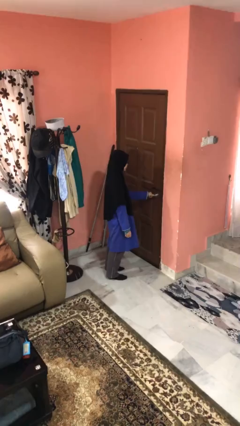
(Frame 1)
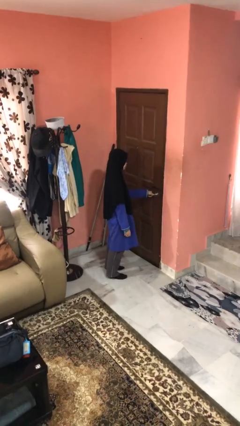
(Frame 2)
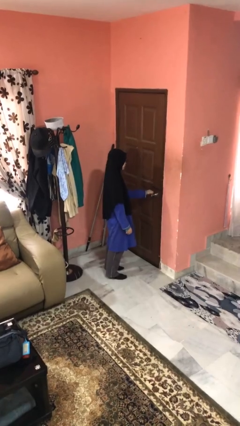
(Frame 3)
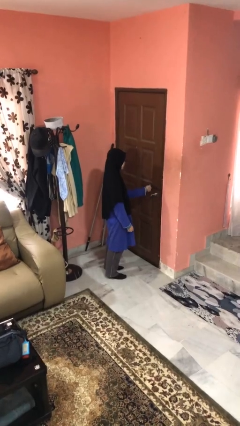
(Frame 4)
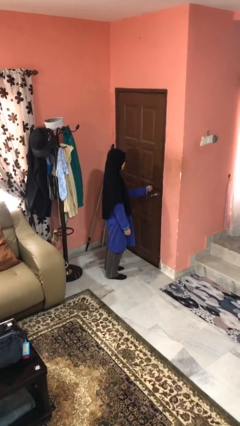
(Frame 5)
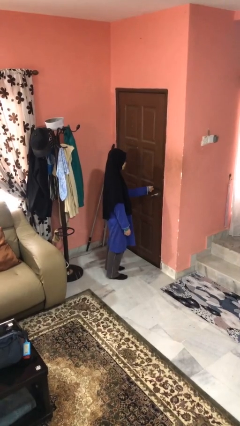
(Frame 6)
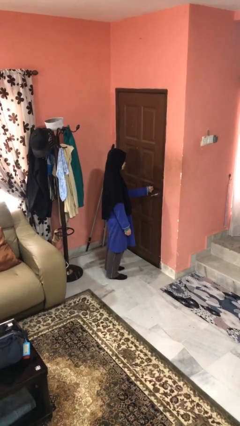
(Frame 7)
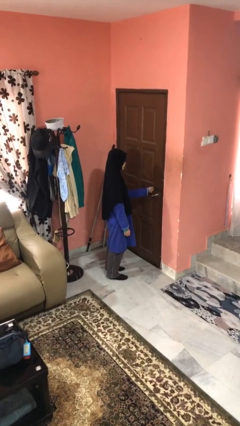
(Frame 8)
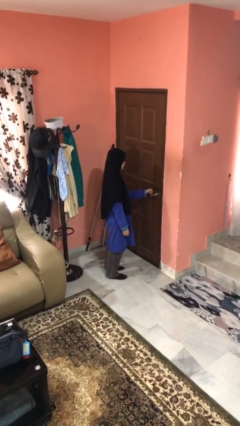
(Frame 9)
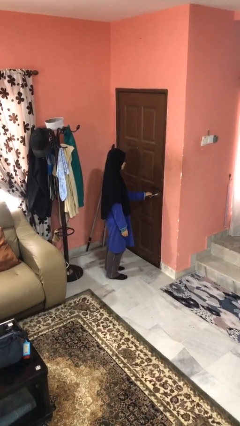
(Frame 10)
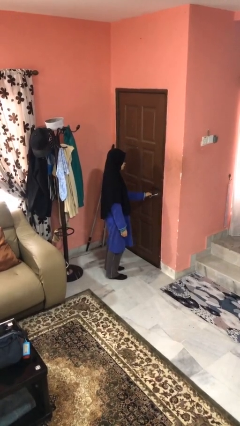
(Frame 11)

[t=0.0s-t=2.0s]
person locks door with keys

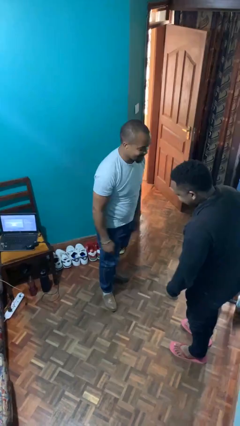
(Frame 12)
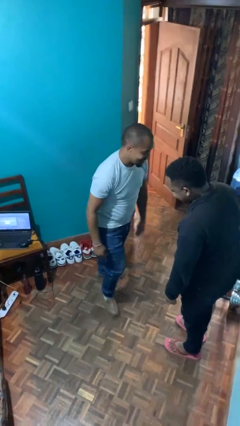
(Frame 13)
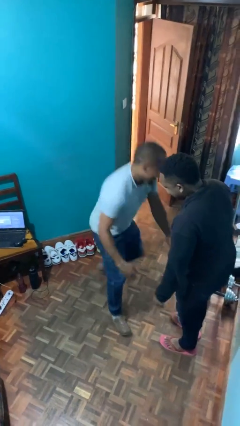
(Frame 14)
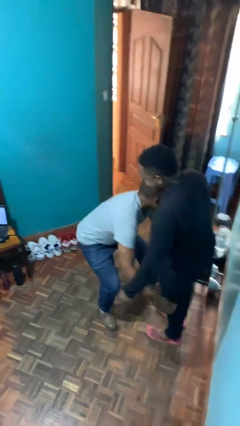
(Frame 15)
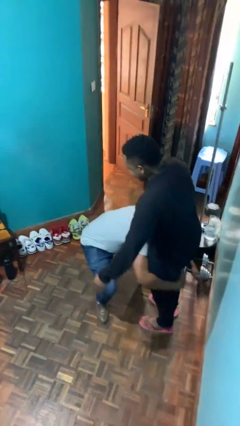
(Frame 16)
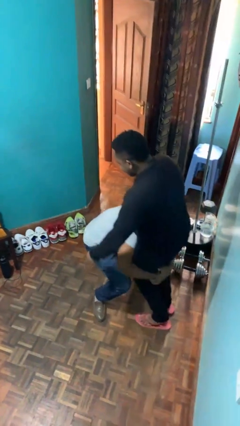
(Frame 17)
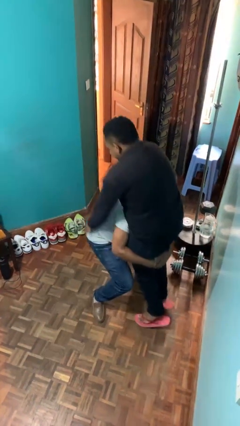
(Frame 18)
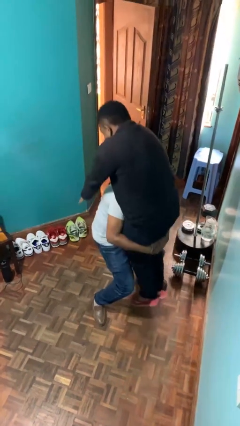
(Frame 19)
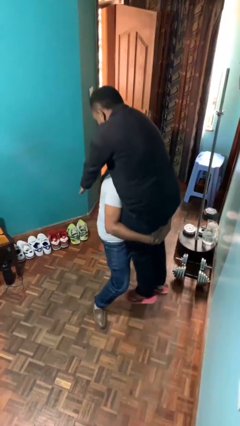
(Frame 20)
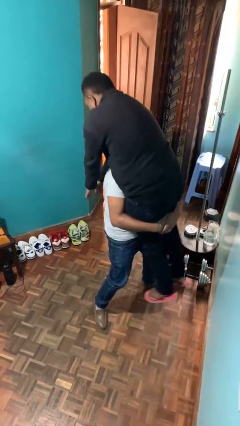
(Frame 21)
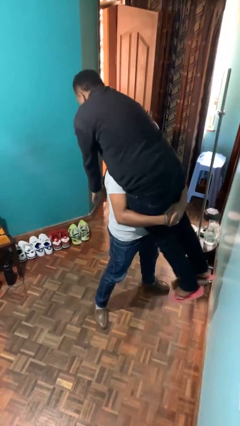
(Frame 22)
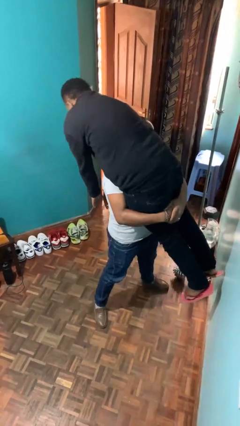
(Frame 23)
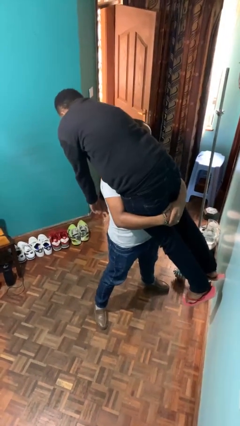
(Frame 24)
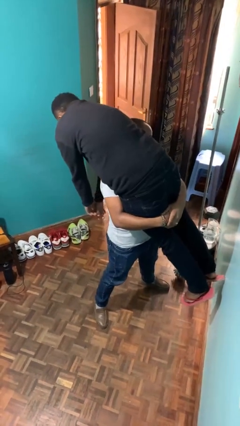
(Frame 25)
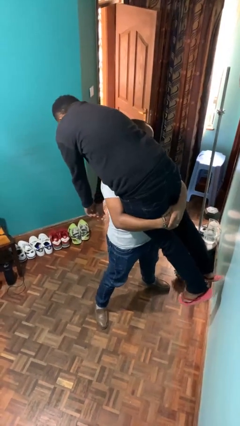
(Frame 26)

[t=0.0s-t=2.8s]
person carries person over shoulder

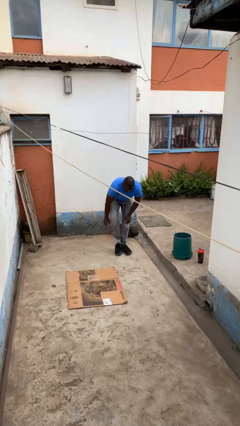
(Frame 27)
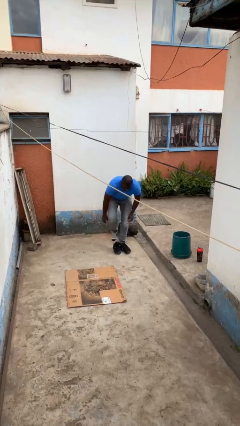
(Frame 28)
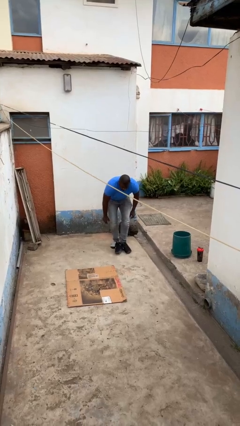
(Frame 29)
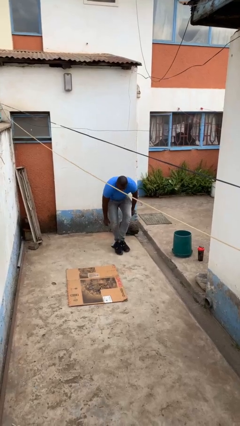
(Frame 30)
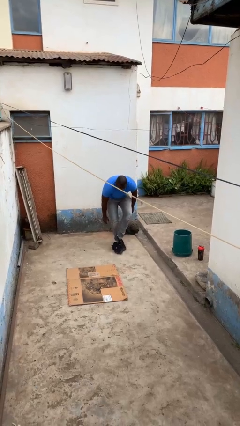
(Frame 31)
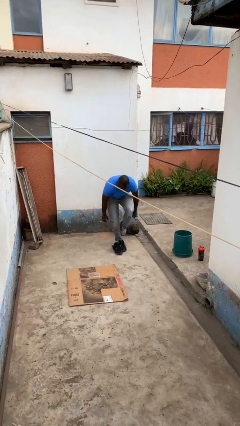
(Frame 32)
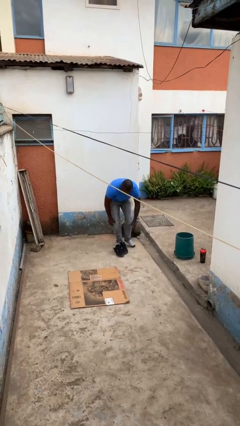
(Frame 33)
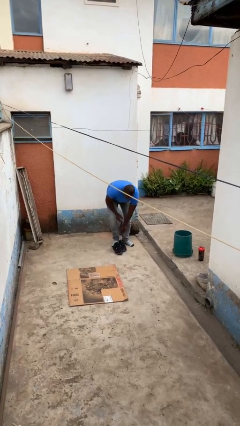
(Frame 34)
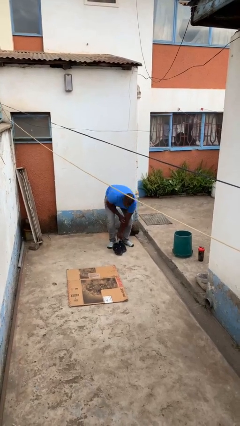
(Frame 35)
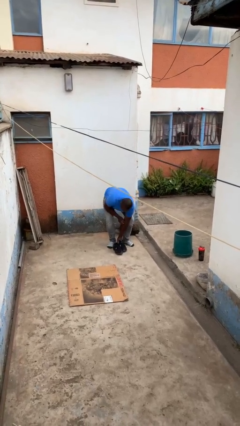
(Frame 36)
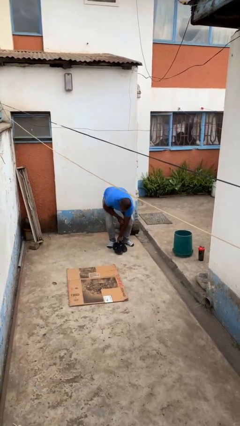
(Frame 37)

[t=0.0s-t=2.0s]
person takes off shoes

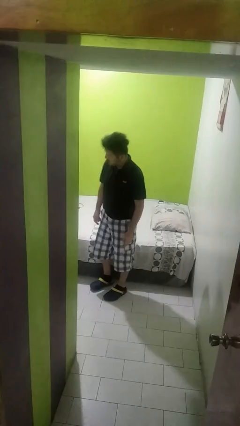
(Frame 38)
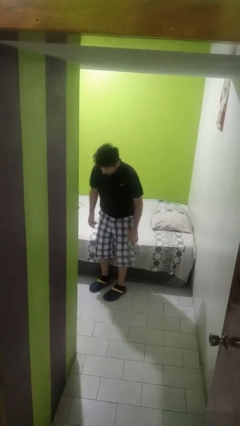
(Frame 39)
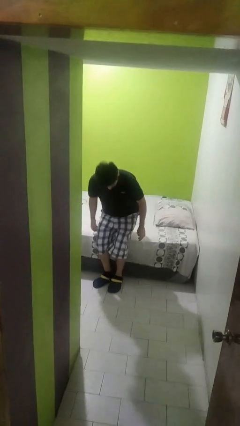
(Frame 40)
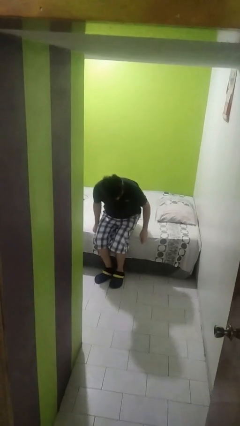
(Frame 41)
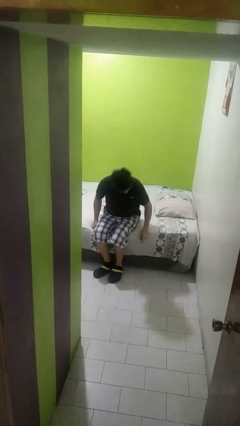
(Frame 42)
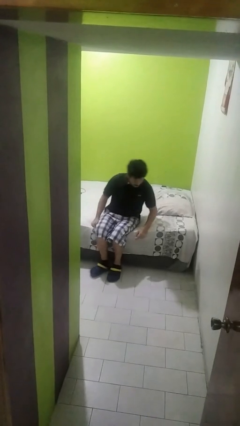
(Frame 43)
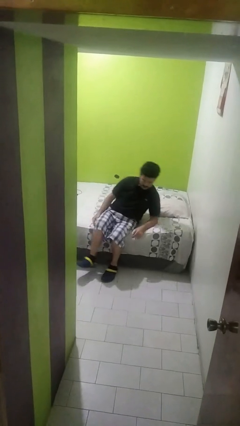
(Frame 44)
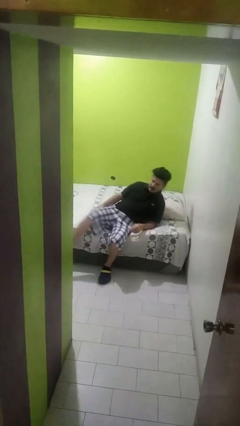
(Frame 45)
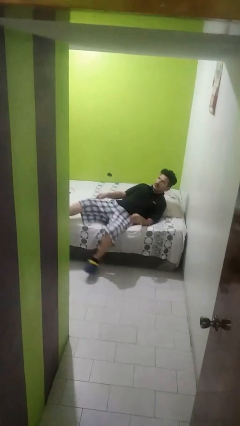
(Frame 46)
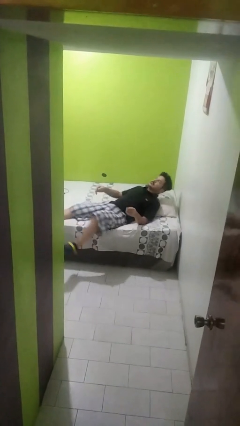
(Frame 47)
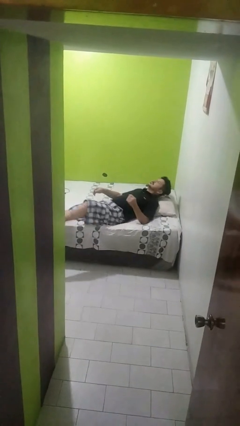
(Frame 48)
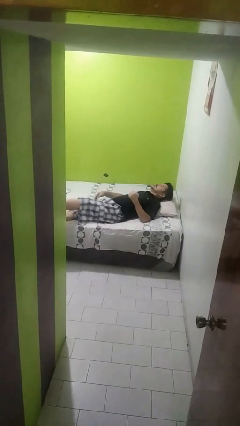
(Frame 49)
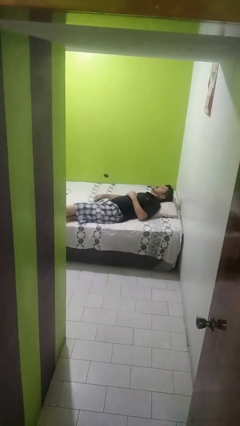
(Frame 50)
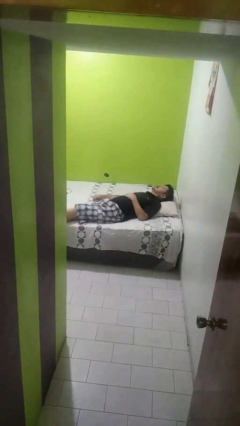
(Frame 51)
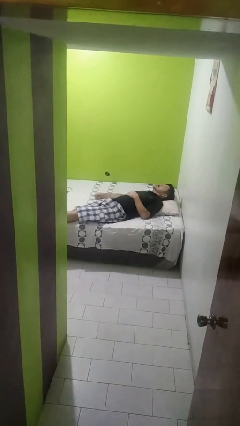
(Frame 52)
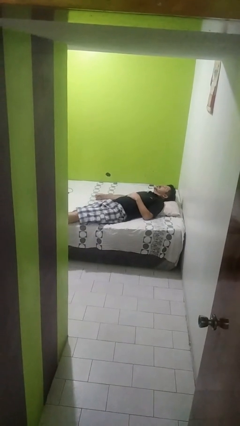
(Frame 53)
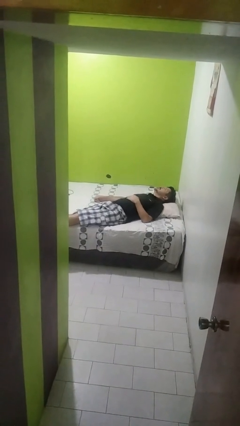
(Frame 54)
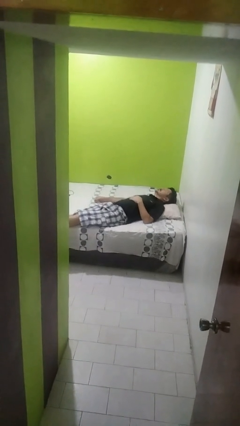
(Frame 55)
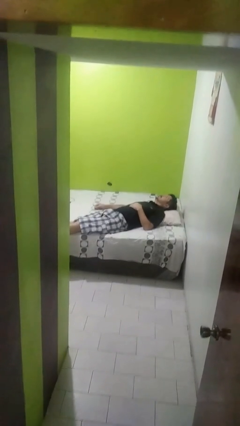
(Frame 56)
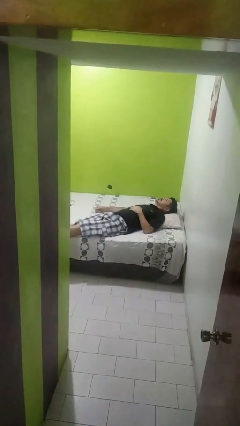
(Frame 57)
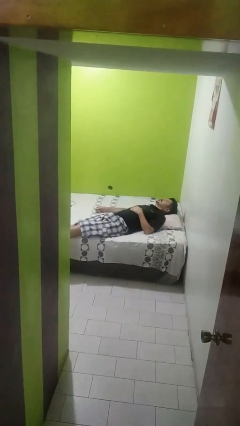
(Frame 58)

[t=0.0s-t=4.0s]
person lies down on bed

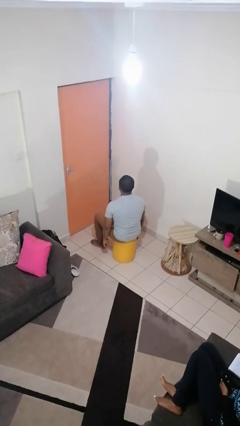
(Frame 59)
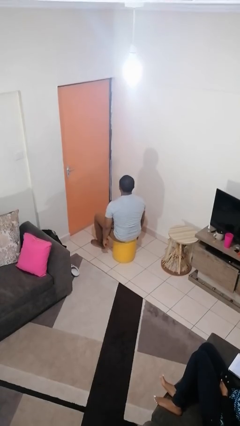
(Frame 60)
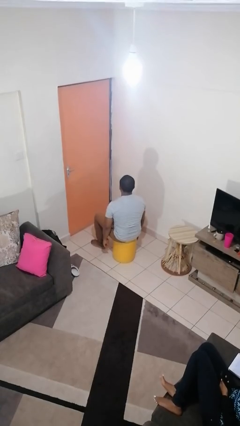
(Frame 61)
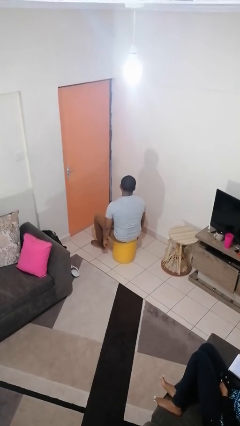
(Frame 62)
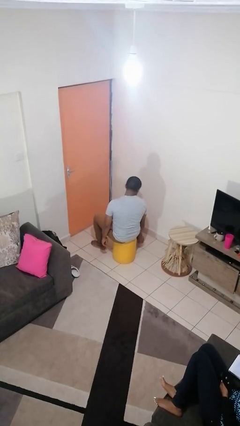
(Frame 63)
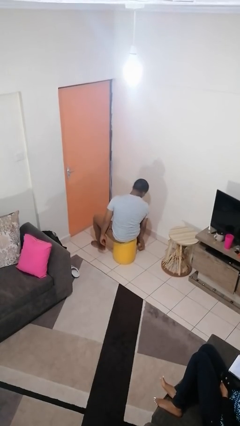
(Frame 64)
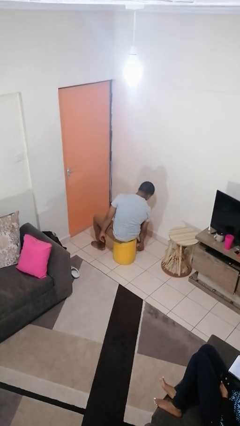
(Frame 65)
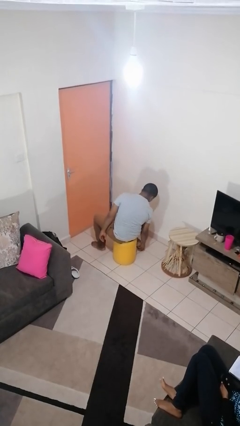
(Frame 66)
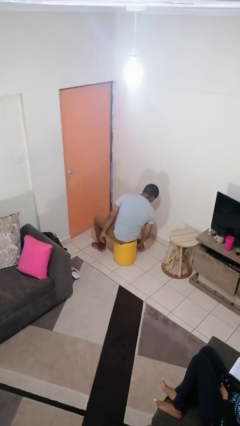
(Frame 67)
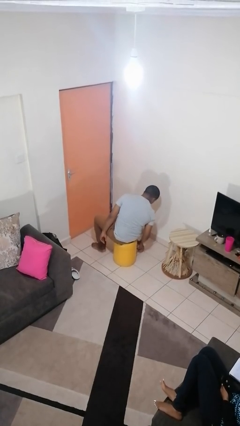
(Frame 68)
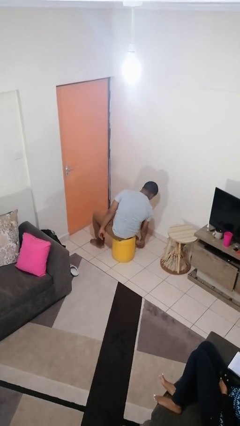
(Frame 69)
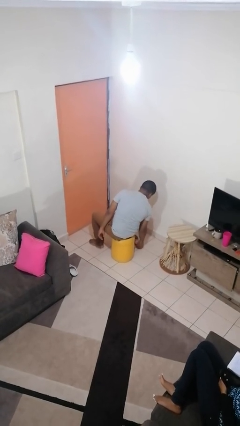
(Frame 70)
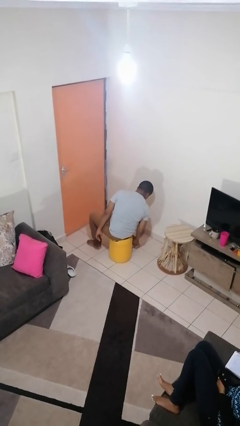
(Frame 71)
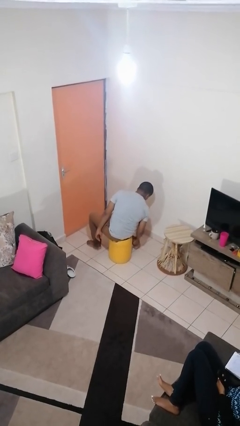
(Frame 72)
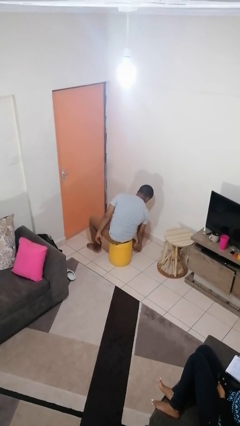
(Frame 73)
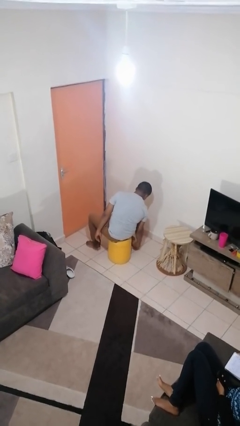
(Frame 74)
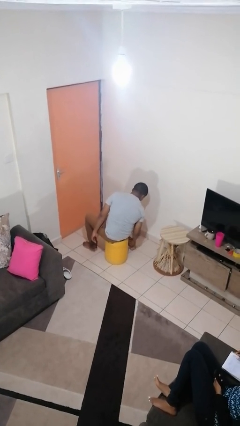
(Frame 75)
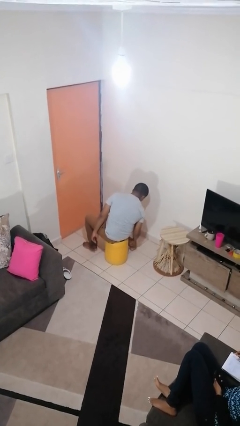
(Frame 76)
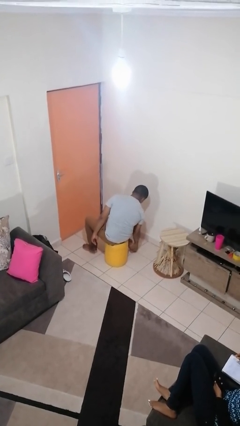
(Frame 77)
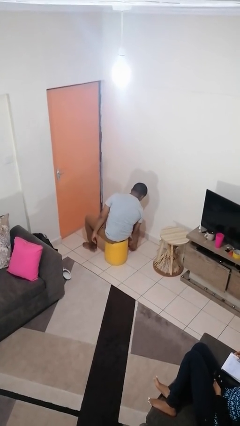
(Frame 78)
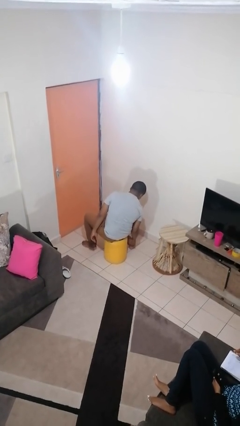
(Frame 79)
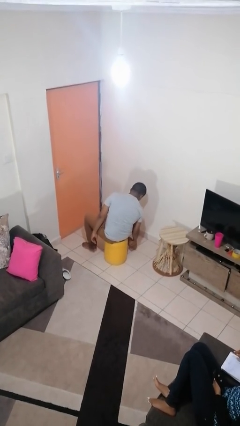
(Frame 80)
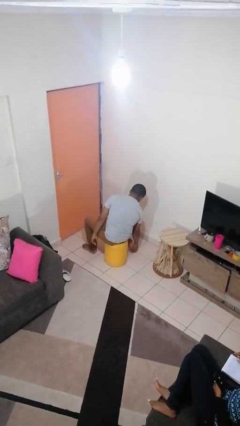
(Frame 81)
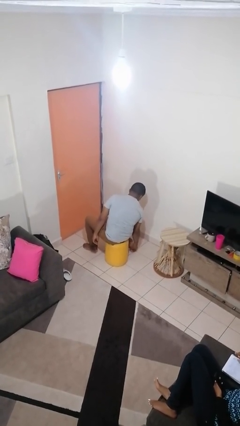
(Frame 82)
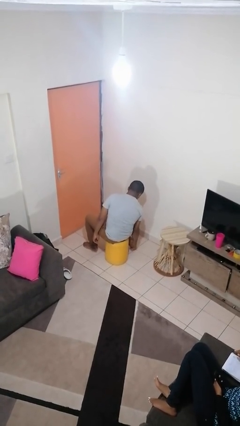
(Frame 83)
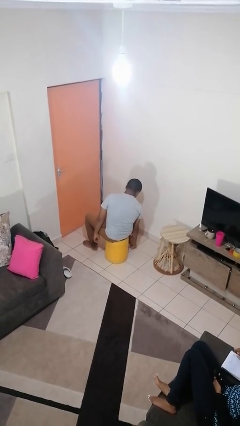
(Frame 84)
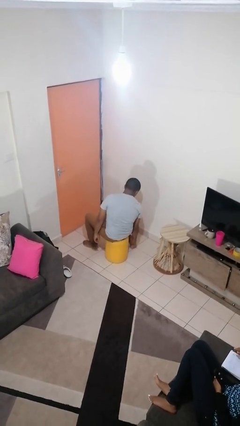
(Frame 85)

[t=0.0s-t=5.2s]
person rubs foot

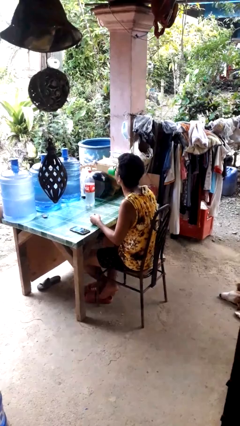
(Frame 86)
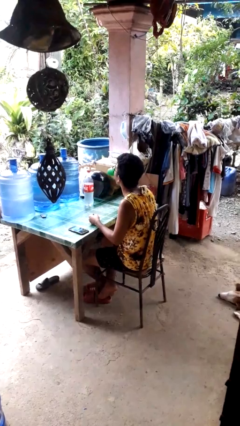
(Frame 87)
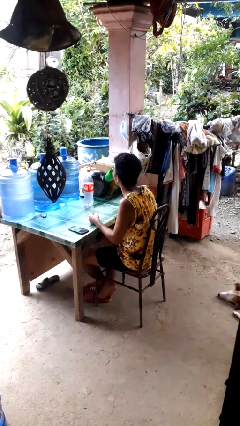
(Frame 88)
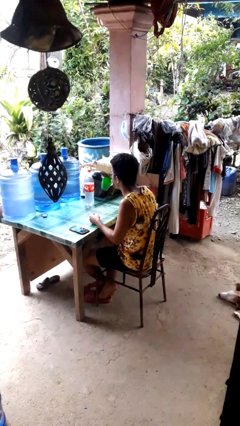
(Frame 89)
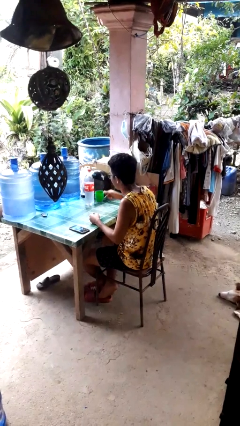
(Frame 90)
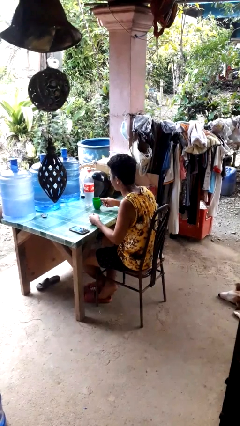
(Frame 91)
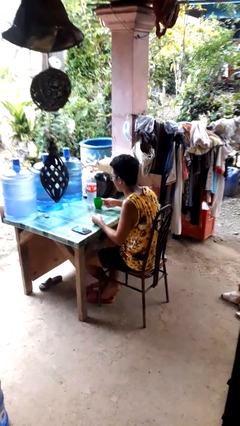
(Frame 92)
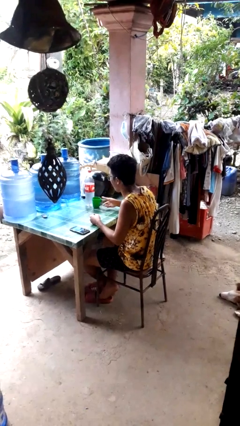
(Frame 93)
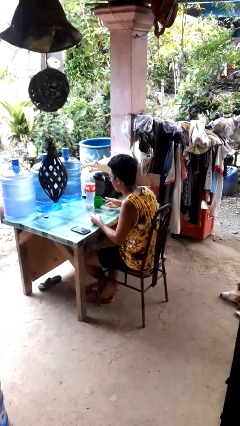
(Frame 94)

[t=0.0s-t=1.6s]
person drinks from cup
